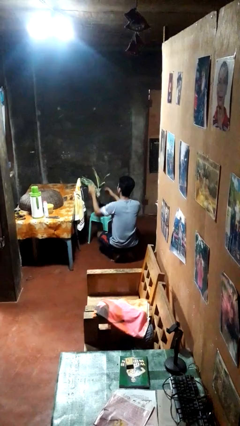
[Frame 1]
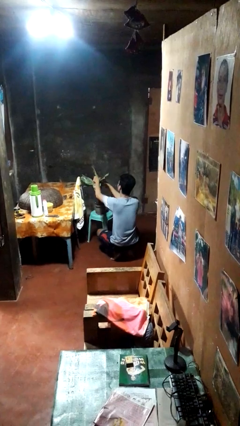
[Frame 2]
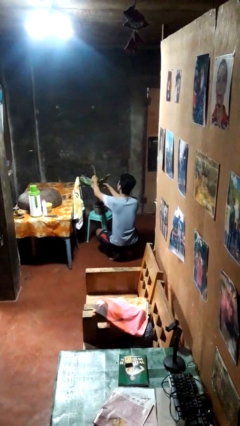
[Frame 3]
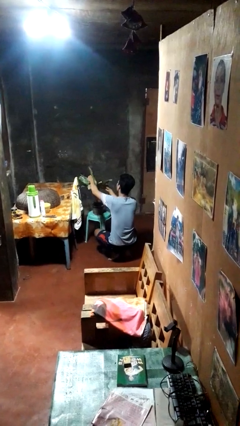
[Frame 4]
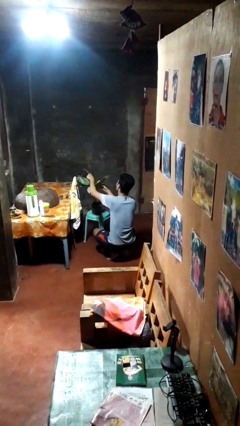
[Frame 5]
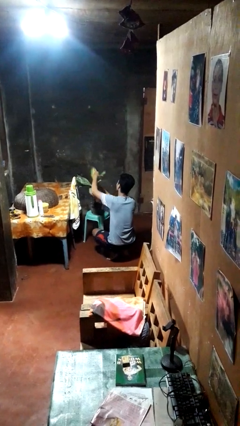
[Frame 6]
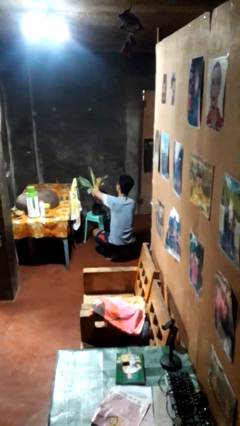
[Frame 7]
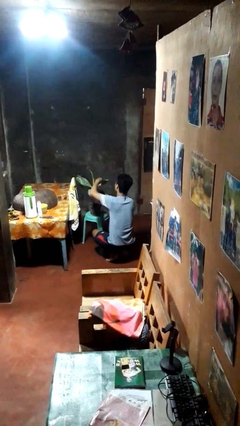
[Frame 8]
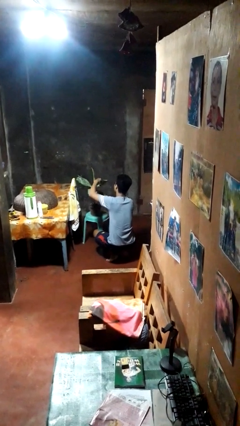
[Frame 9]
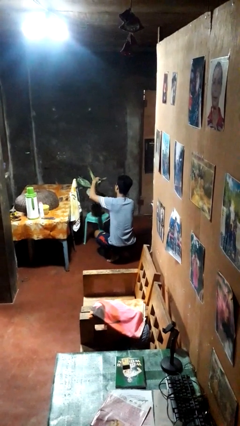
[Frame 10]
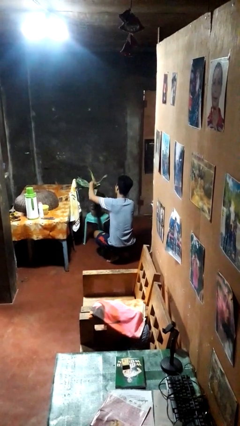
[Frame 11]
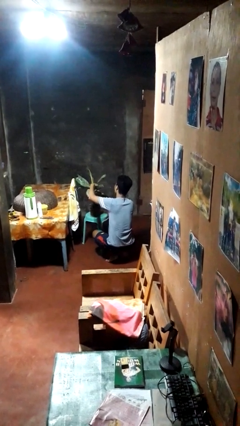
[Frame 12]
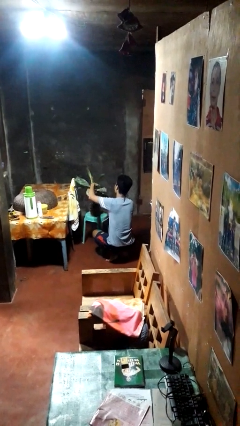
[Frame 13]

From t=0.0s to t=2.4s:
person arranges flowers in vase

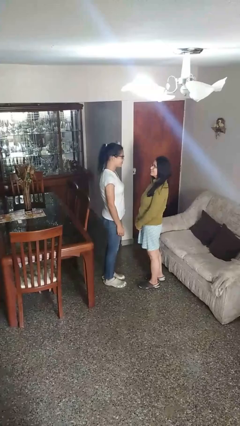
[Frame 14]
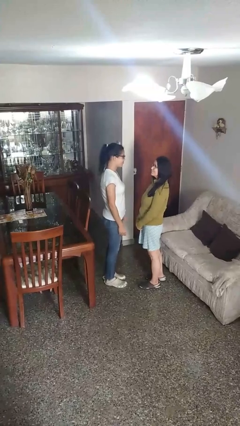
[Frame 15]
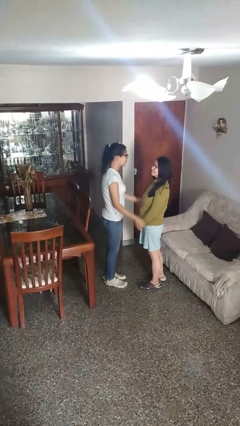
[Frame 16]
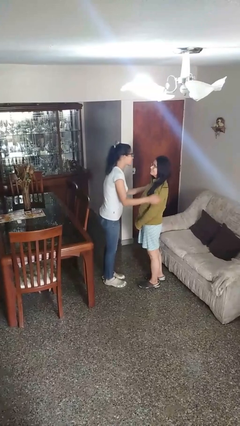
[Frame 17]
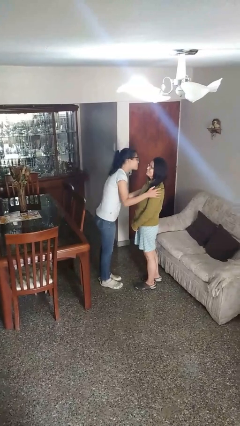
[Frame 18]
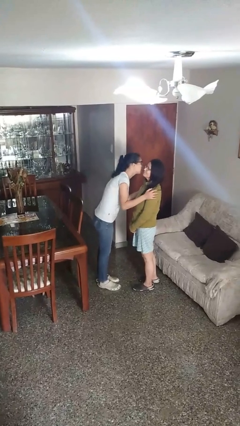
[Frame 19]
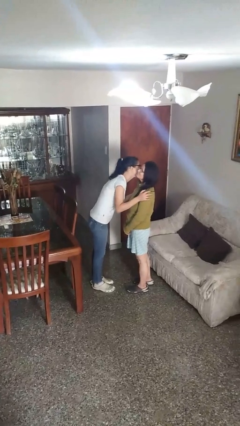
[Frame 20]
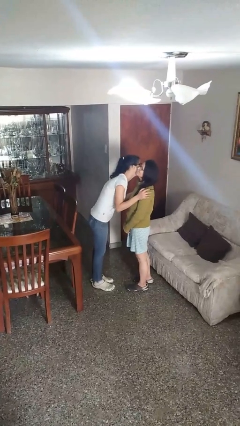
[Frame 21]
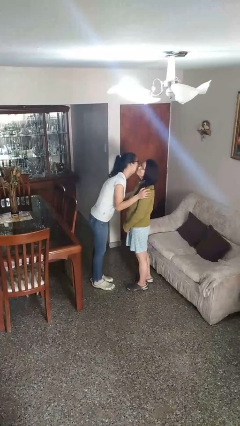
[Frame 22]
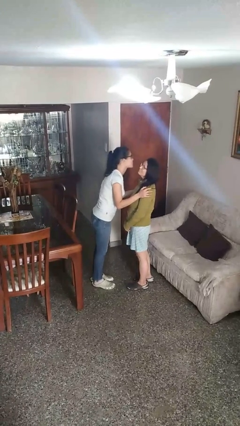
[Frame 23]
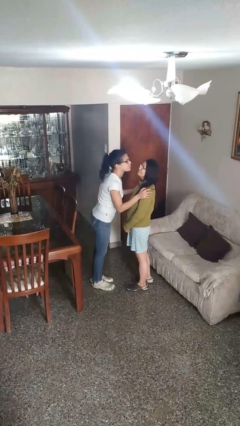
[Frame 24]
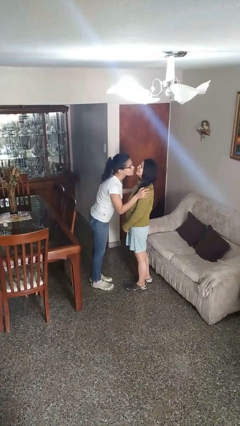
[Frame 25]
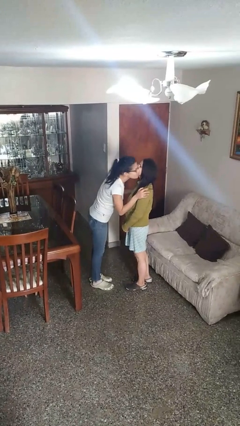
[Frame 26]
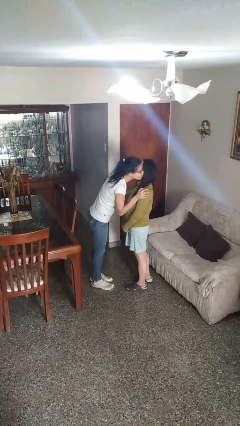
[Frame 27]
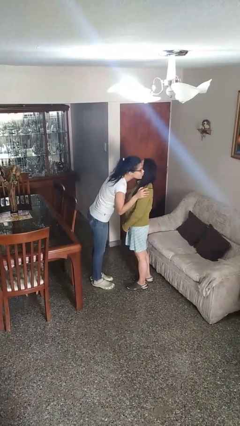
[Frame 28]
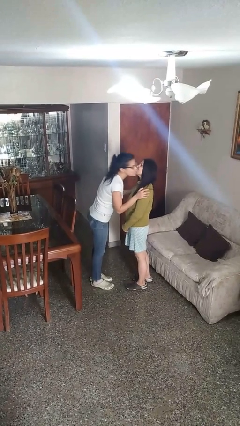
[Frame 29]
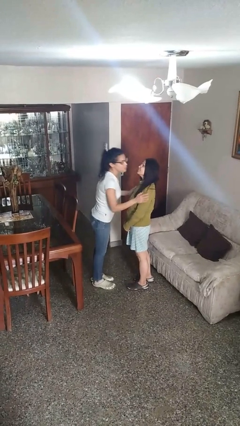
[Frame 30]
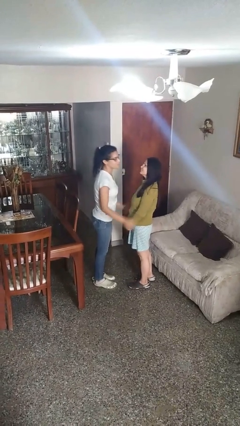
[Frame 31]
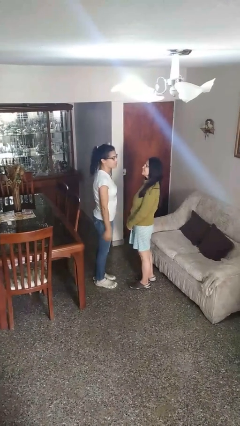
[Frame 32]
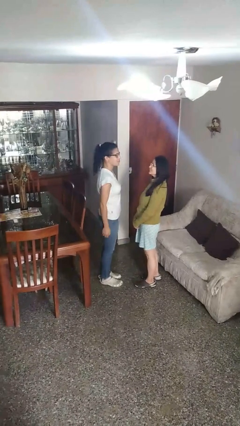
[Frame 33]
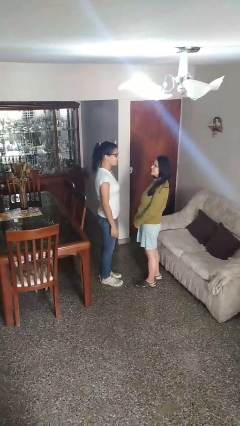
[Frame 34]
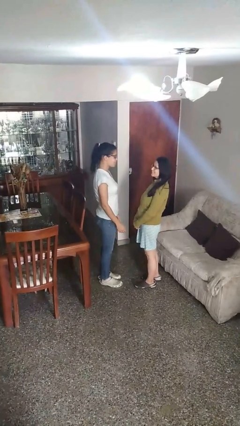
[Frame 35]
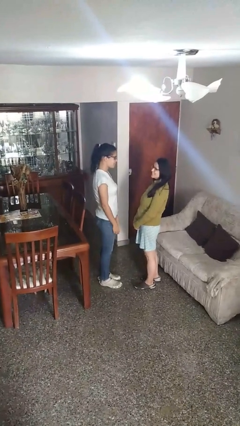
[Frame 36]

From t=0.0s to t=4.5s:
person kisses cheek of person

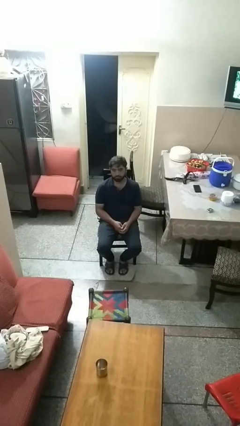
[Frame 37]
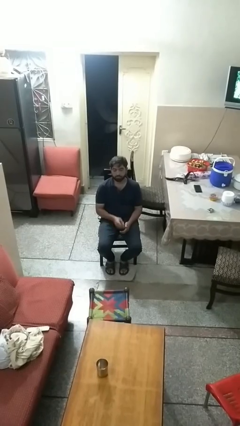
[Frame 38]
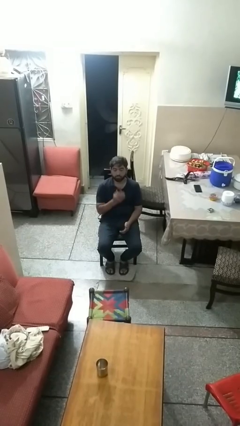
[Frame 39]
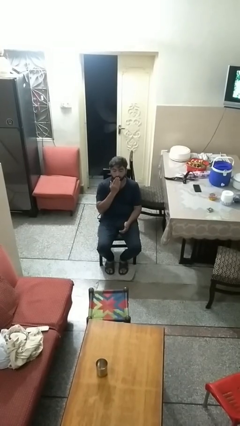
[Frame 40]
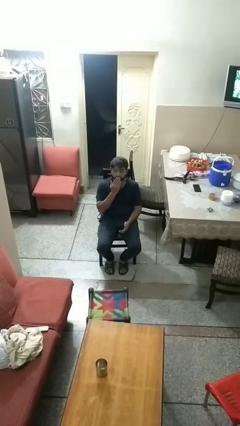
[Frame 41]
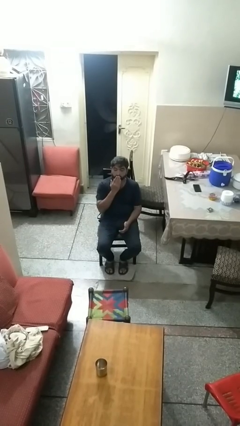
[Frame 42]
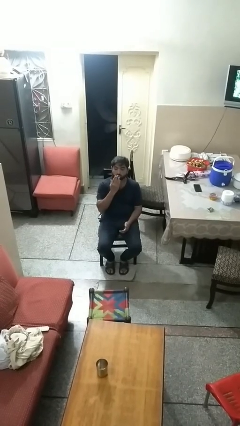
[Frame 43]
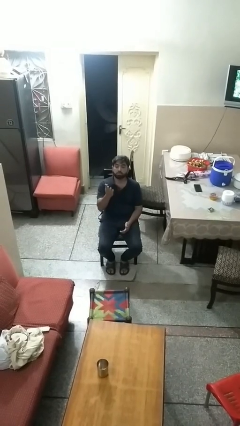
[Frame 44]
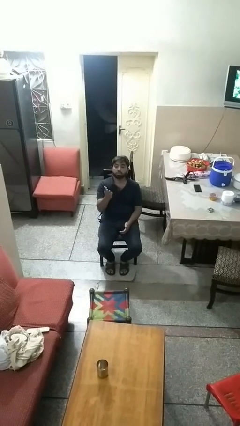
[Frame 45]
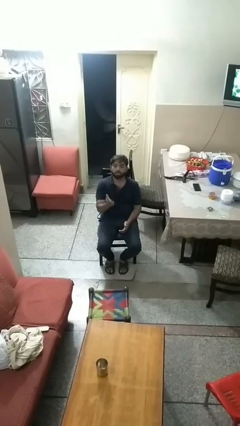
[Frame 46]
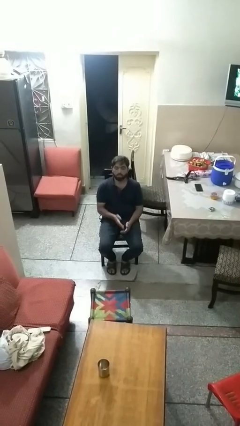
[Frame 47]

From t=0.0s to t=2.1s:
person gestures blow kiss

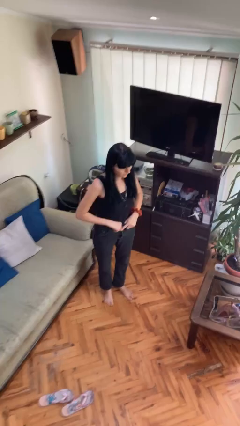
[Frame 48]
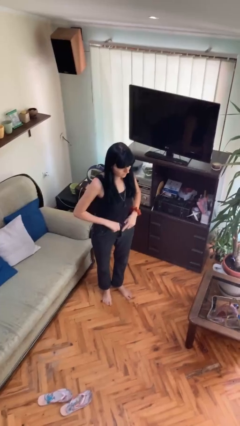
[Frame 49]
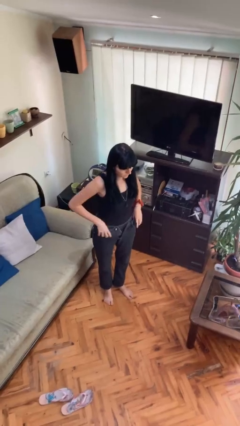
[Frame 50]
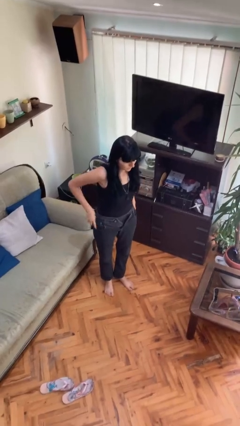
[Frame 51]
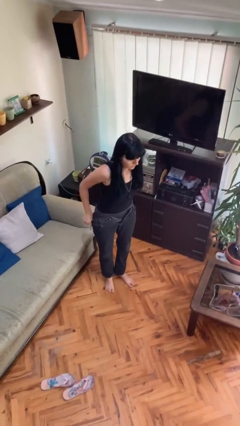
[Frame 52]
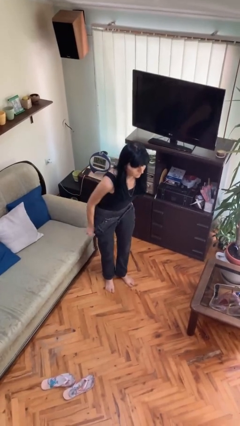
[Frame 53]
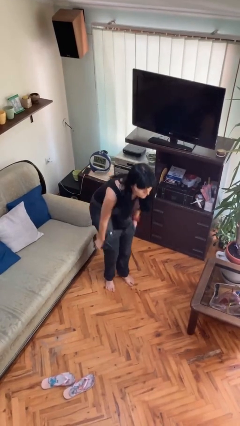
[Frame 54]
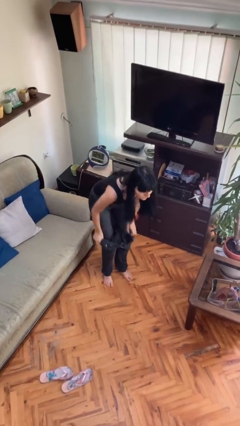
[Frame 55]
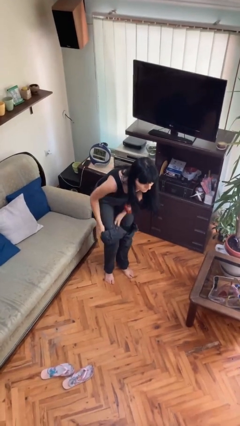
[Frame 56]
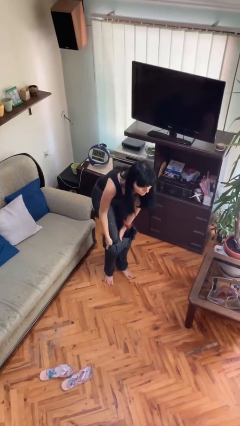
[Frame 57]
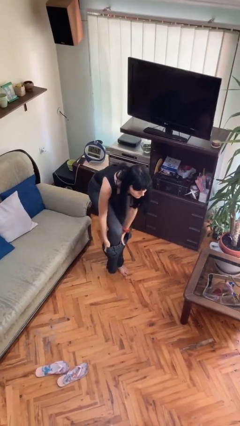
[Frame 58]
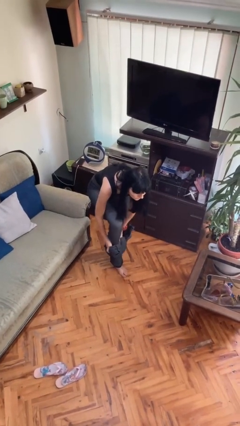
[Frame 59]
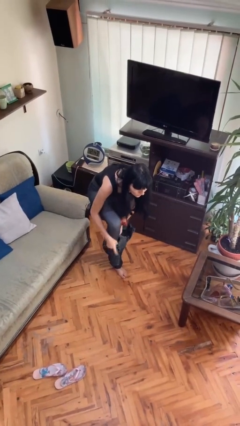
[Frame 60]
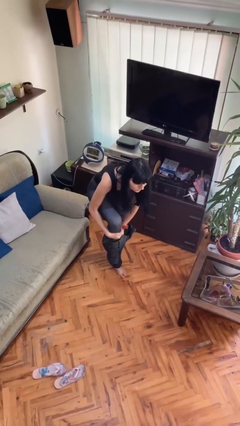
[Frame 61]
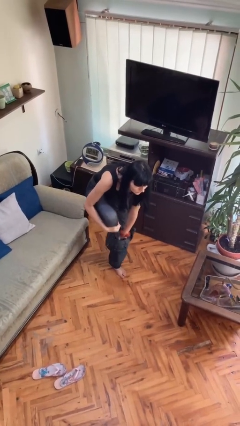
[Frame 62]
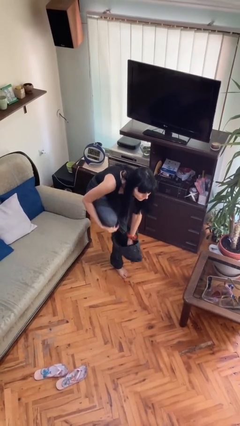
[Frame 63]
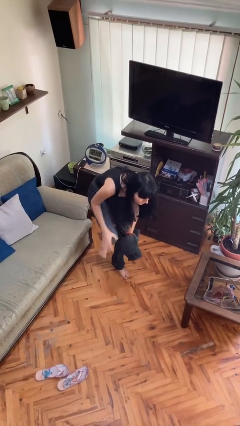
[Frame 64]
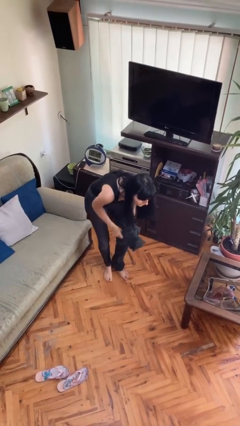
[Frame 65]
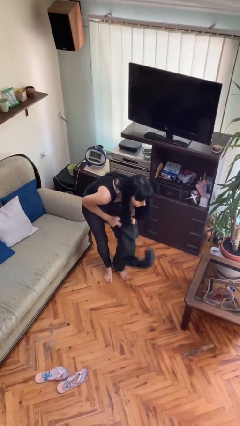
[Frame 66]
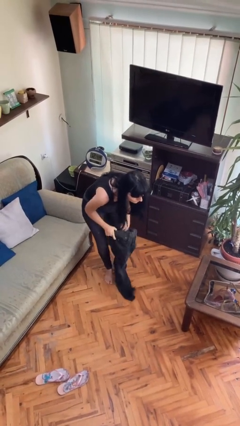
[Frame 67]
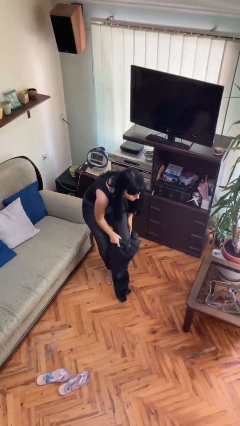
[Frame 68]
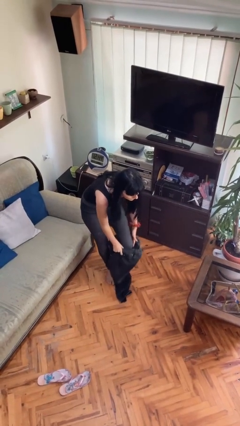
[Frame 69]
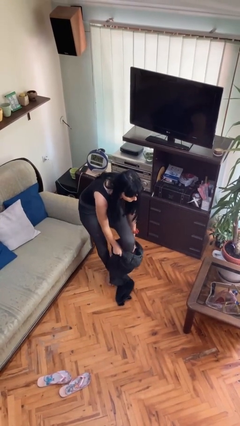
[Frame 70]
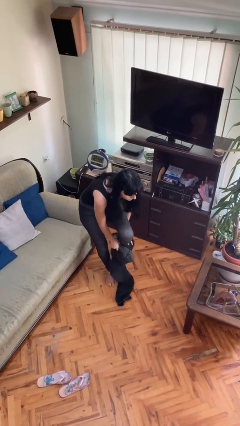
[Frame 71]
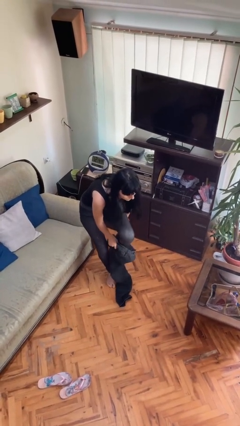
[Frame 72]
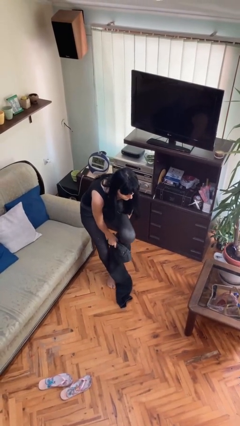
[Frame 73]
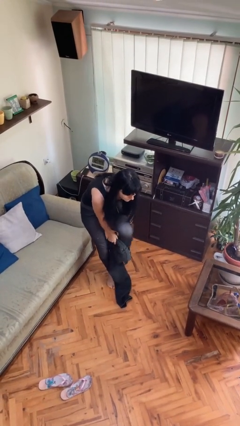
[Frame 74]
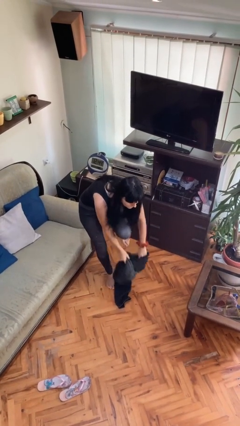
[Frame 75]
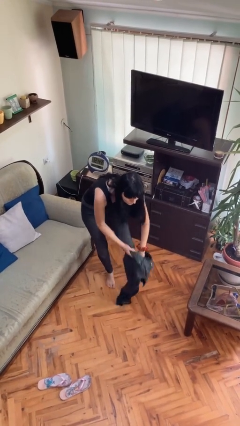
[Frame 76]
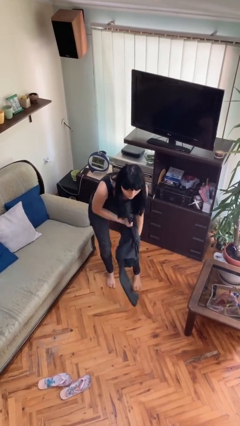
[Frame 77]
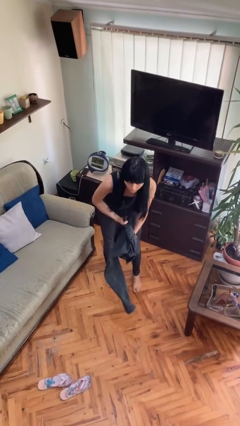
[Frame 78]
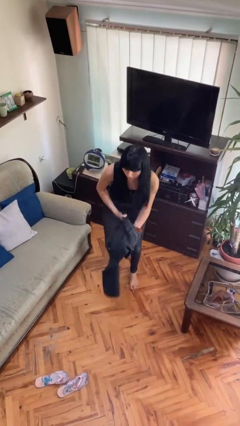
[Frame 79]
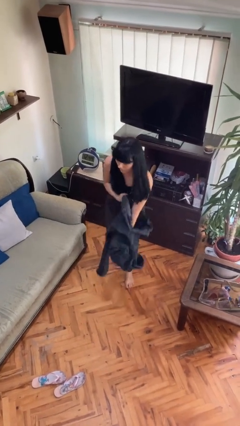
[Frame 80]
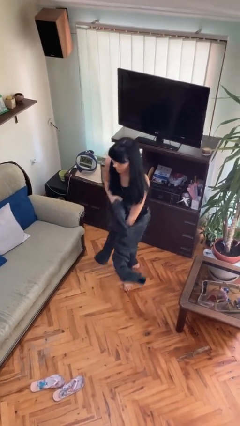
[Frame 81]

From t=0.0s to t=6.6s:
person takes off pants

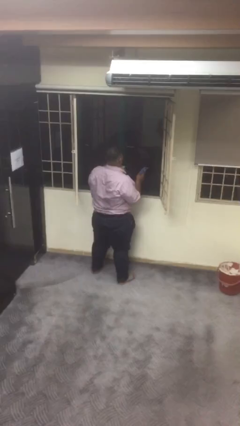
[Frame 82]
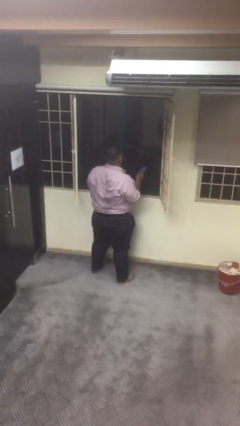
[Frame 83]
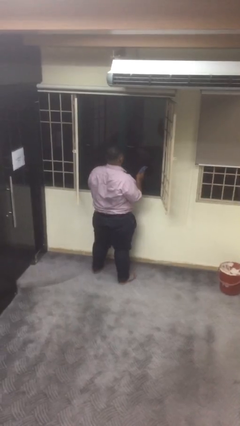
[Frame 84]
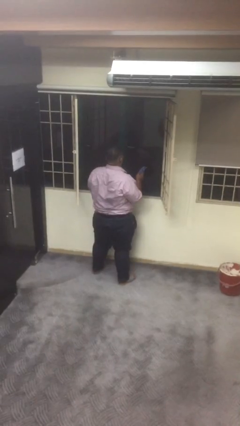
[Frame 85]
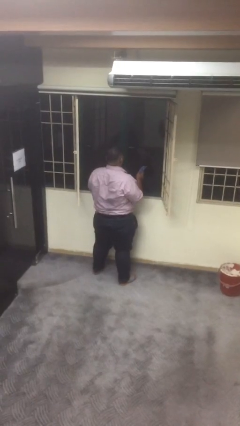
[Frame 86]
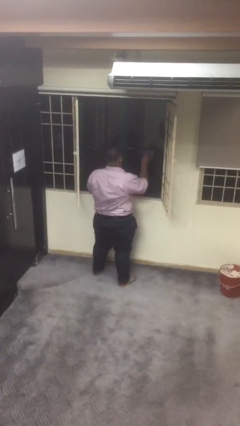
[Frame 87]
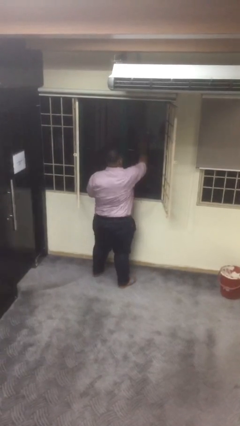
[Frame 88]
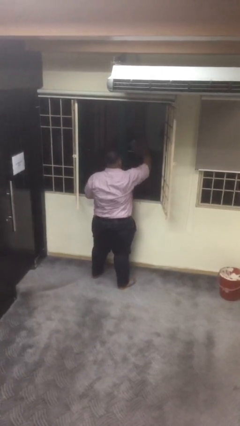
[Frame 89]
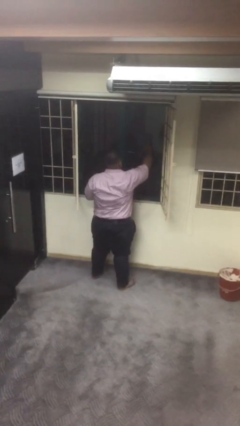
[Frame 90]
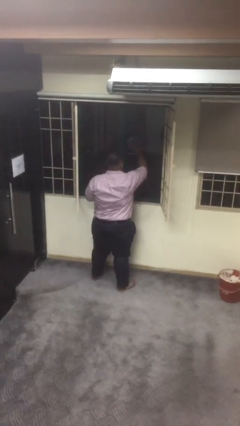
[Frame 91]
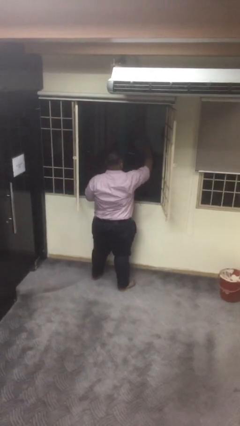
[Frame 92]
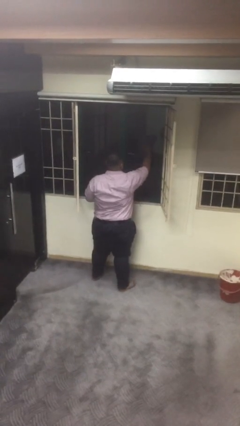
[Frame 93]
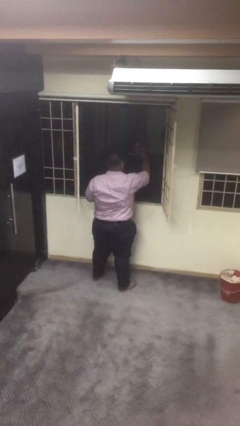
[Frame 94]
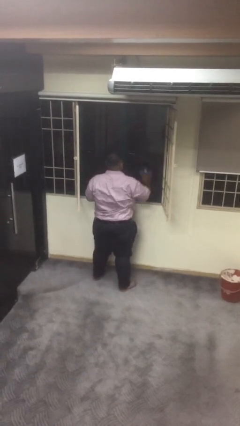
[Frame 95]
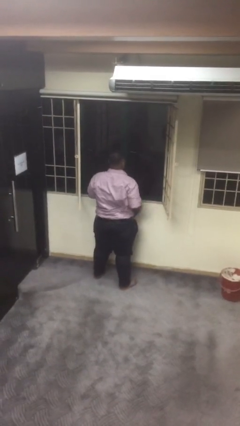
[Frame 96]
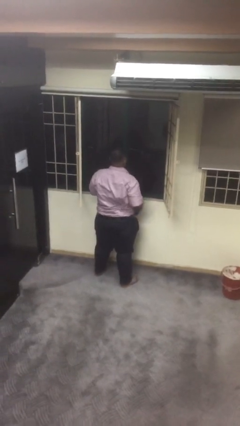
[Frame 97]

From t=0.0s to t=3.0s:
person washes window
